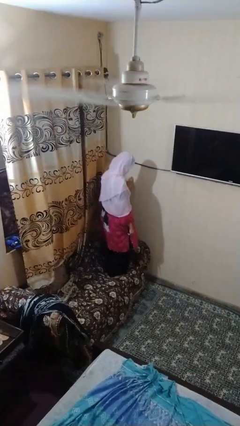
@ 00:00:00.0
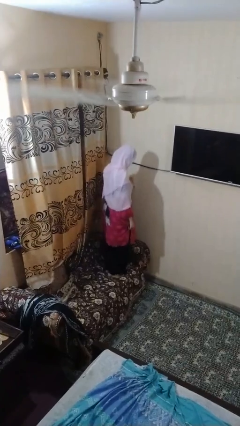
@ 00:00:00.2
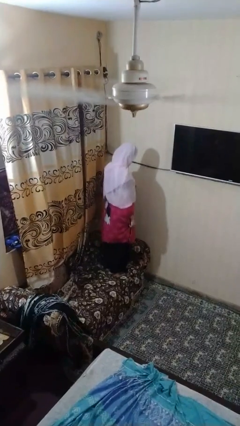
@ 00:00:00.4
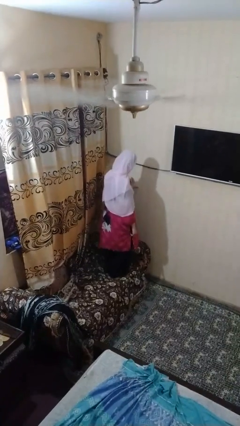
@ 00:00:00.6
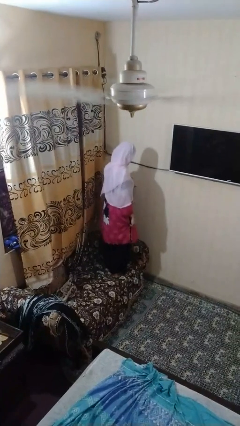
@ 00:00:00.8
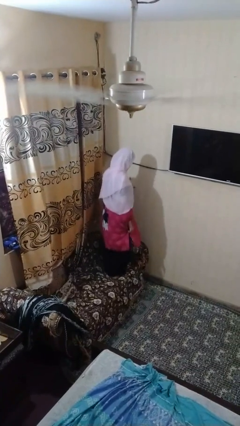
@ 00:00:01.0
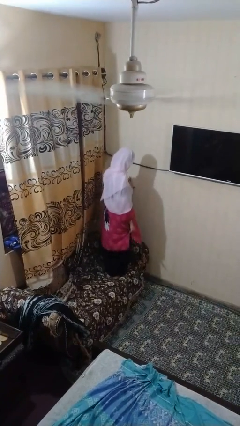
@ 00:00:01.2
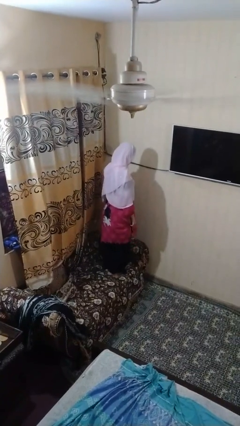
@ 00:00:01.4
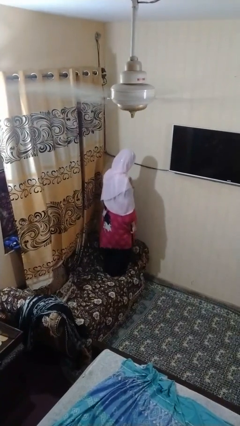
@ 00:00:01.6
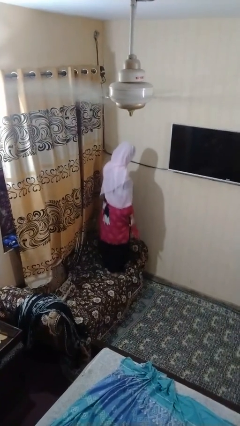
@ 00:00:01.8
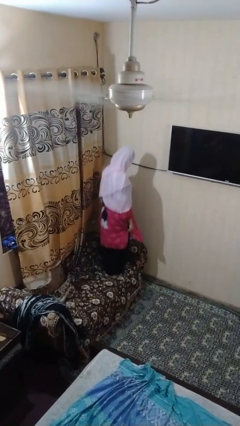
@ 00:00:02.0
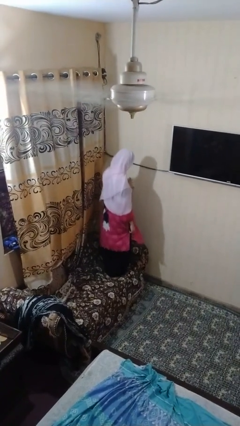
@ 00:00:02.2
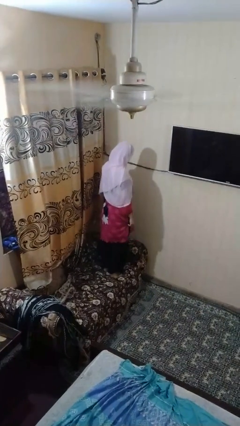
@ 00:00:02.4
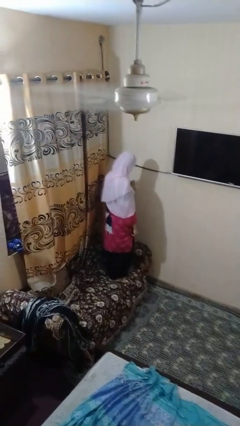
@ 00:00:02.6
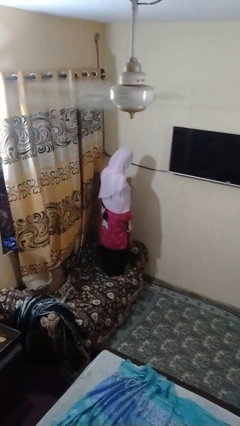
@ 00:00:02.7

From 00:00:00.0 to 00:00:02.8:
person jumps on couch

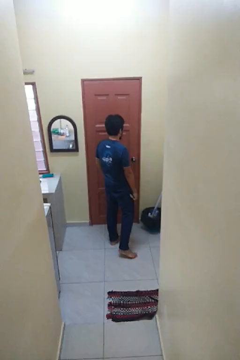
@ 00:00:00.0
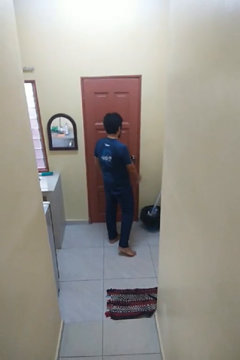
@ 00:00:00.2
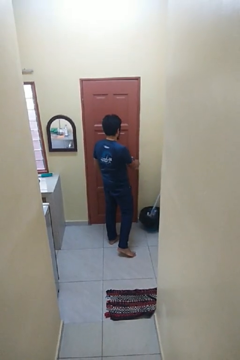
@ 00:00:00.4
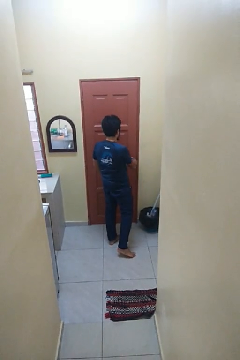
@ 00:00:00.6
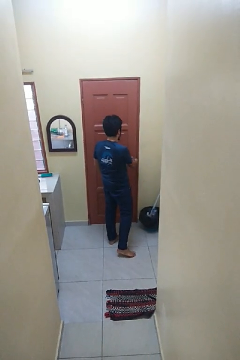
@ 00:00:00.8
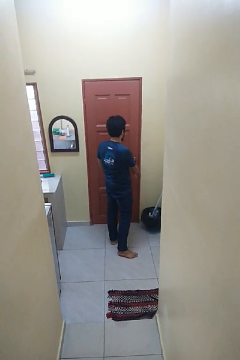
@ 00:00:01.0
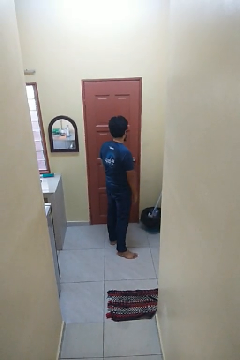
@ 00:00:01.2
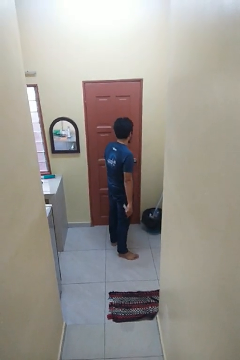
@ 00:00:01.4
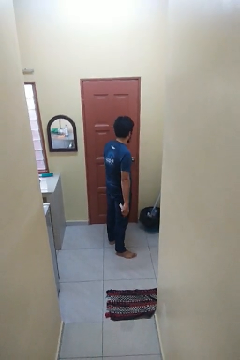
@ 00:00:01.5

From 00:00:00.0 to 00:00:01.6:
person locks door with keys

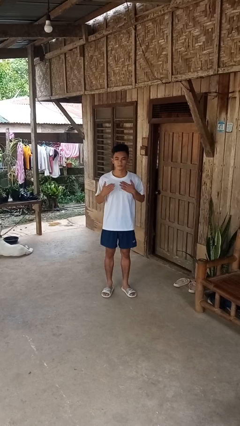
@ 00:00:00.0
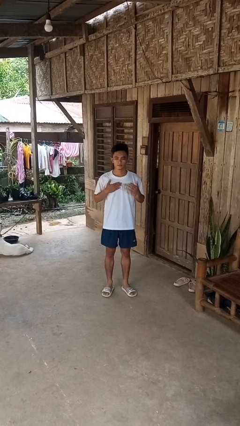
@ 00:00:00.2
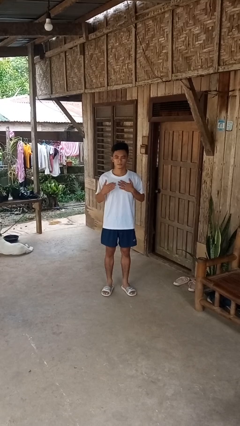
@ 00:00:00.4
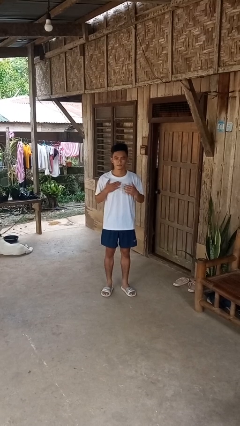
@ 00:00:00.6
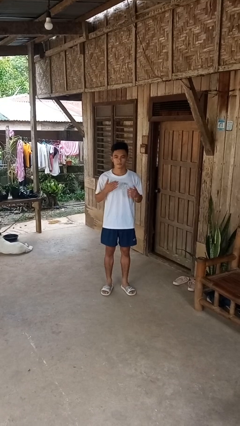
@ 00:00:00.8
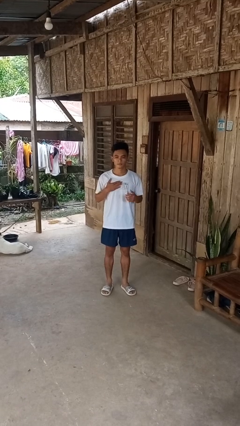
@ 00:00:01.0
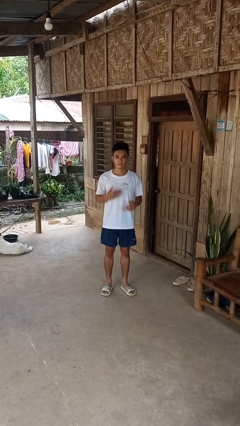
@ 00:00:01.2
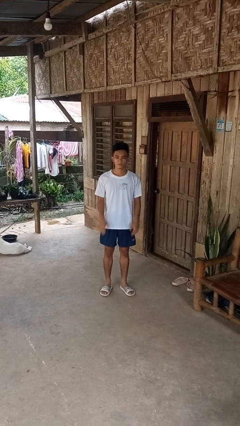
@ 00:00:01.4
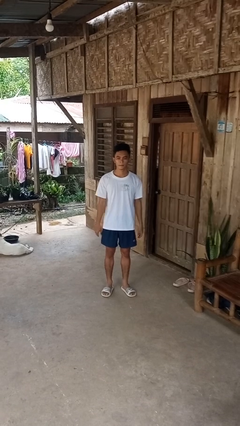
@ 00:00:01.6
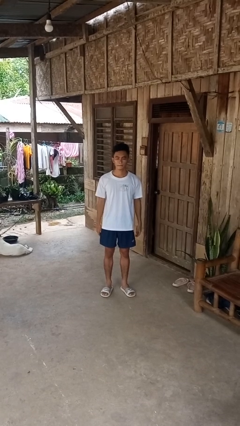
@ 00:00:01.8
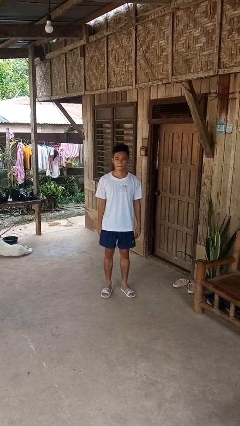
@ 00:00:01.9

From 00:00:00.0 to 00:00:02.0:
person drums on chest

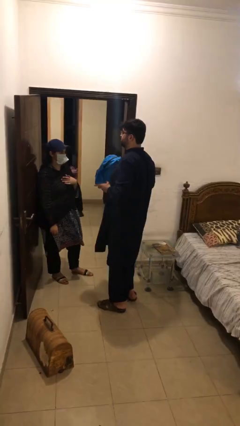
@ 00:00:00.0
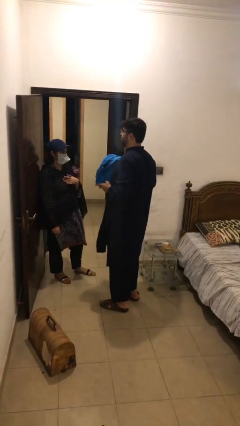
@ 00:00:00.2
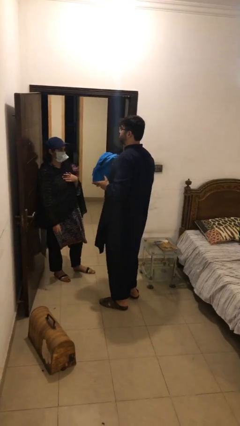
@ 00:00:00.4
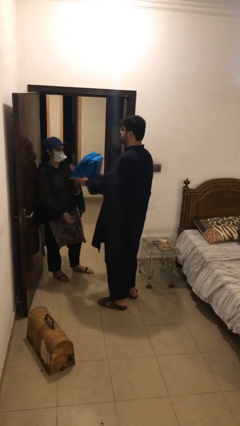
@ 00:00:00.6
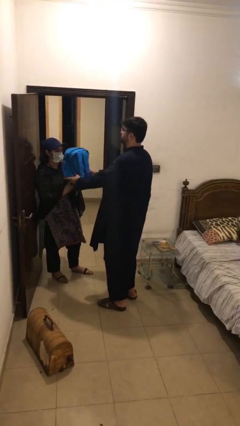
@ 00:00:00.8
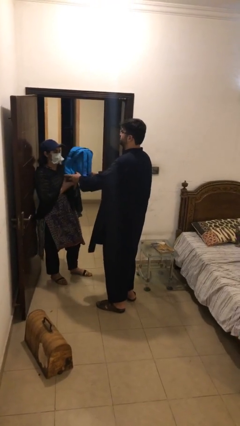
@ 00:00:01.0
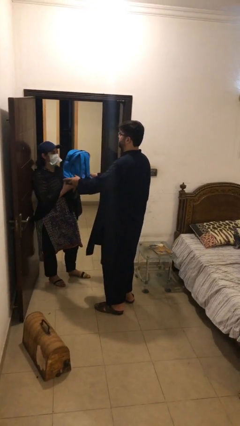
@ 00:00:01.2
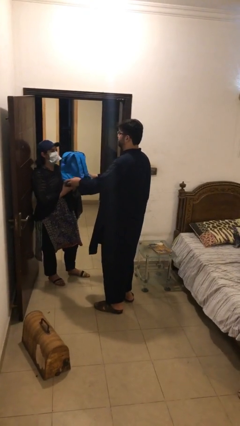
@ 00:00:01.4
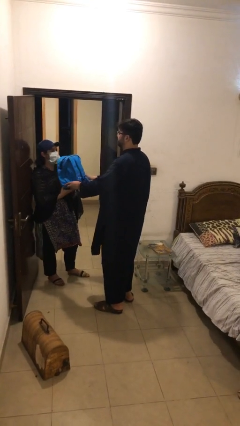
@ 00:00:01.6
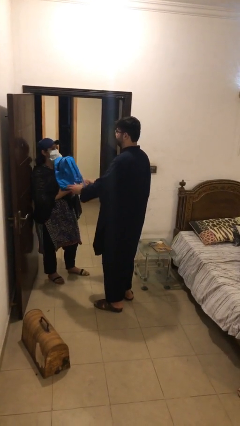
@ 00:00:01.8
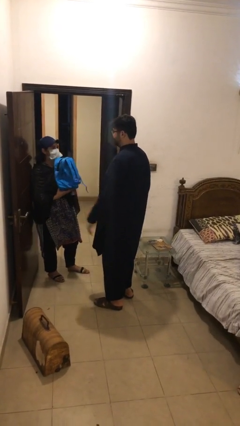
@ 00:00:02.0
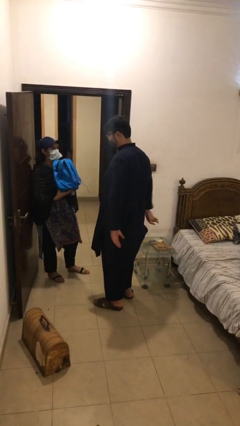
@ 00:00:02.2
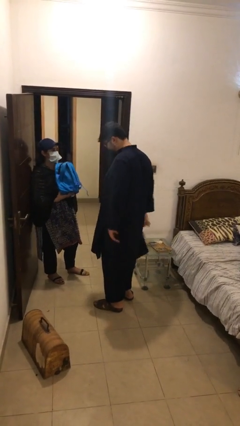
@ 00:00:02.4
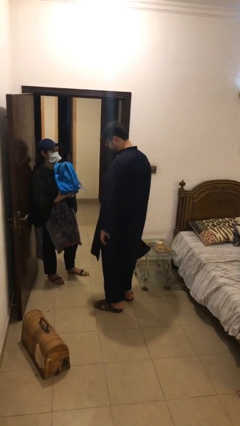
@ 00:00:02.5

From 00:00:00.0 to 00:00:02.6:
person transfers object to person

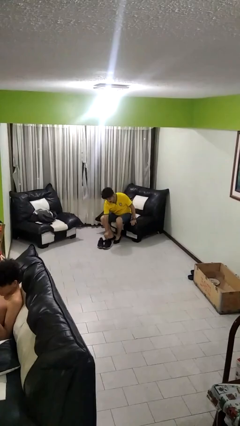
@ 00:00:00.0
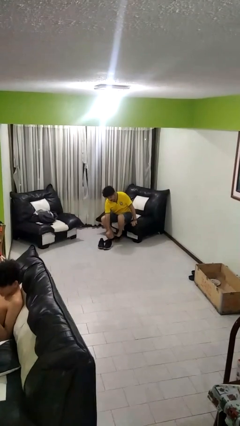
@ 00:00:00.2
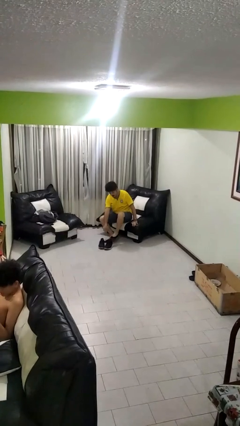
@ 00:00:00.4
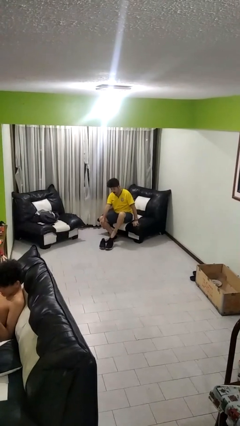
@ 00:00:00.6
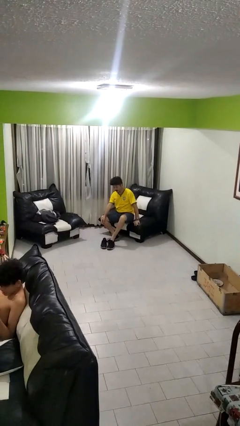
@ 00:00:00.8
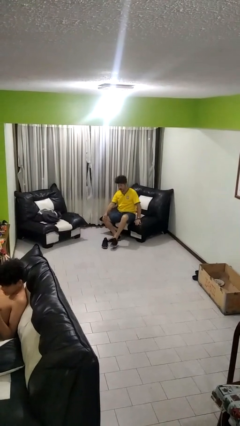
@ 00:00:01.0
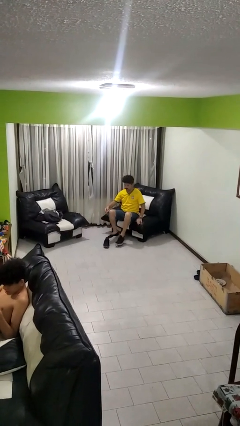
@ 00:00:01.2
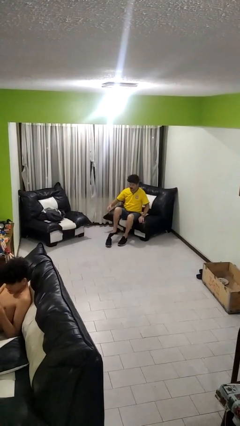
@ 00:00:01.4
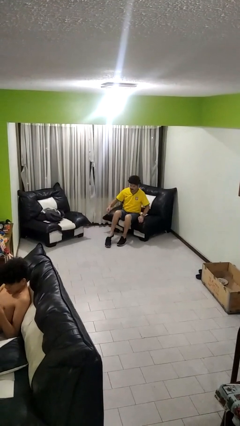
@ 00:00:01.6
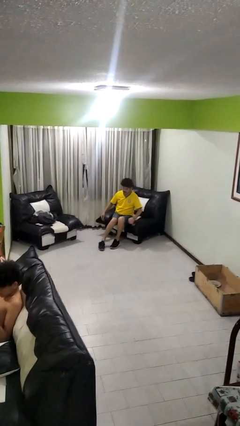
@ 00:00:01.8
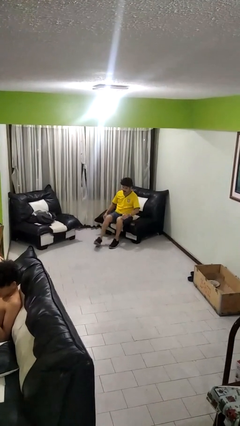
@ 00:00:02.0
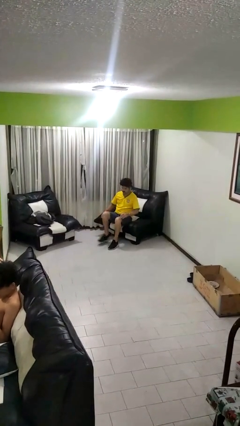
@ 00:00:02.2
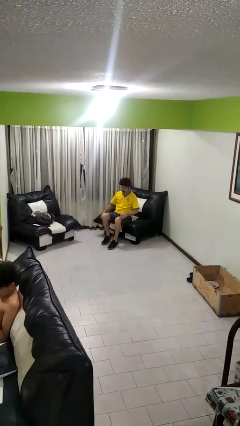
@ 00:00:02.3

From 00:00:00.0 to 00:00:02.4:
person puts on shoes

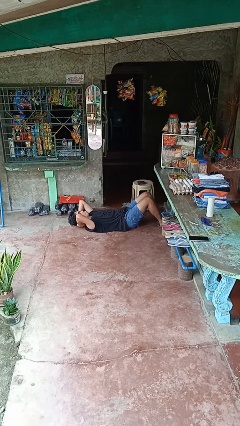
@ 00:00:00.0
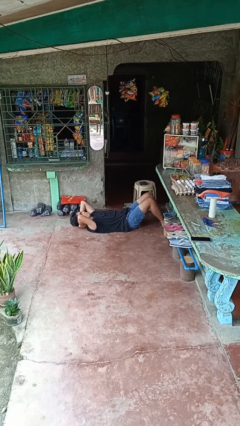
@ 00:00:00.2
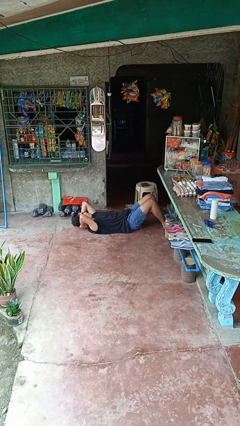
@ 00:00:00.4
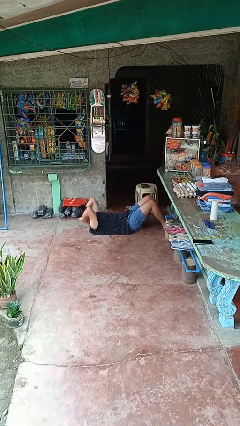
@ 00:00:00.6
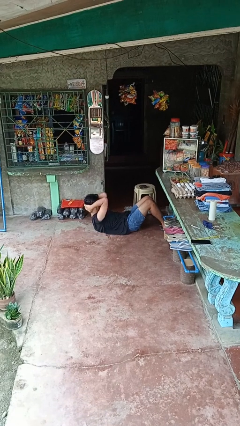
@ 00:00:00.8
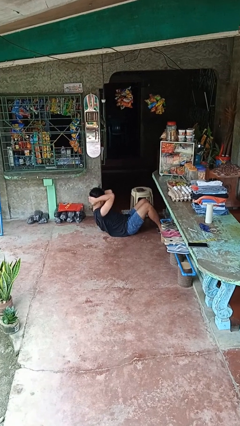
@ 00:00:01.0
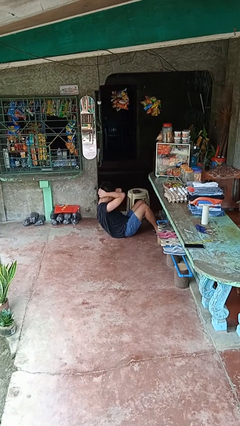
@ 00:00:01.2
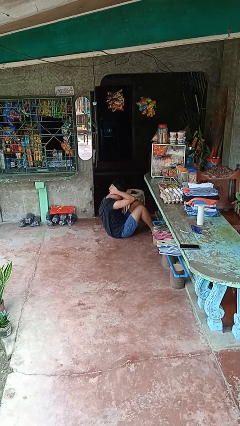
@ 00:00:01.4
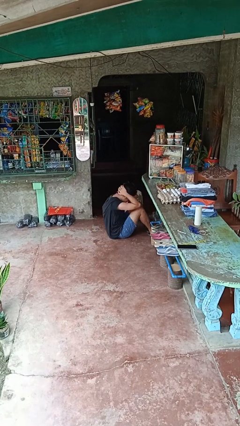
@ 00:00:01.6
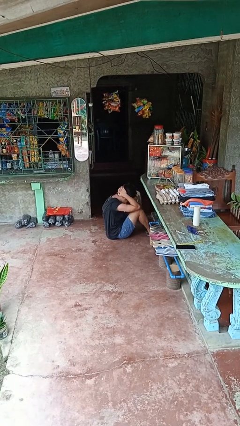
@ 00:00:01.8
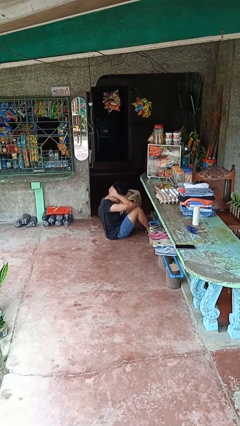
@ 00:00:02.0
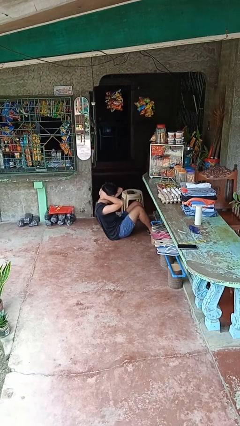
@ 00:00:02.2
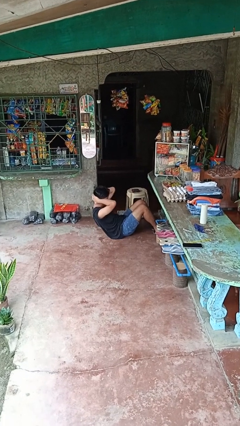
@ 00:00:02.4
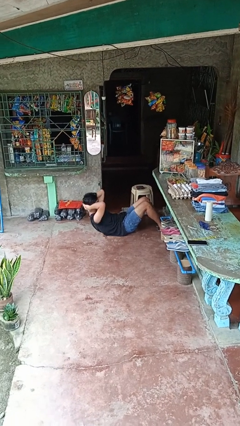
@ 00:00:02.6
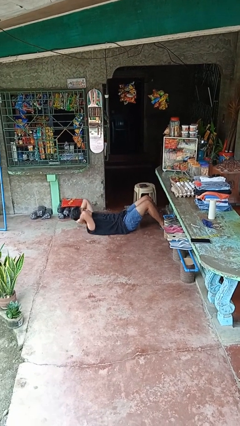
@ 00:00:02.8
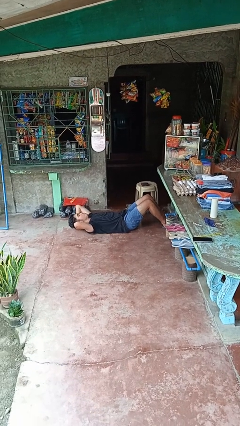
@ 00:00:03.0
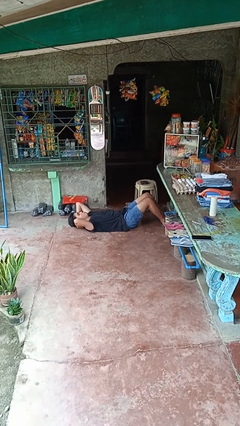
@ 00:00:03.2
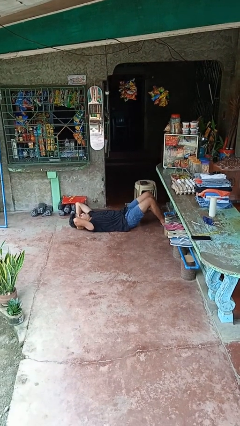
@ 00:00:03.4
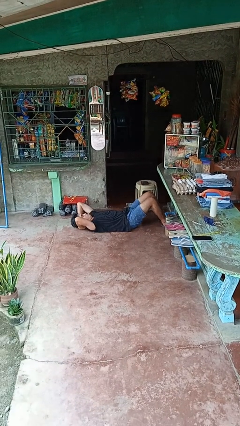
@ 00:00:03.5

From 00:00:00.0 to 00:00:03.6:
person exercises with situp

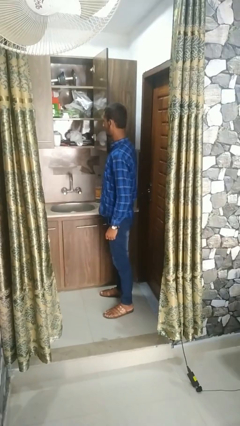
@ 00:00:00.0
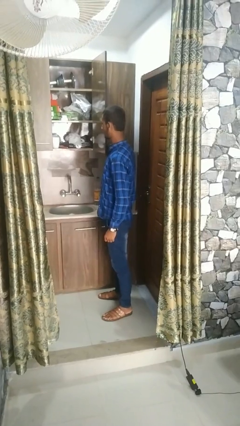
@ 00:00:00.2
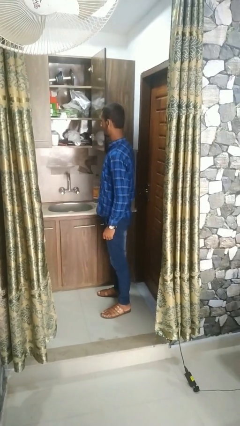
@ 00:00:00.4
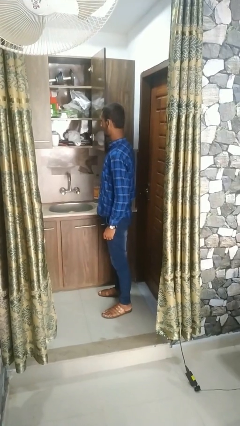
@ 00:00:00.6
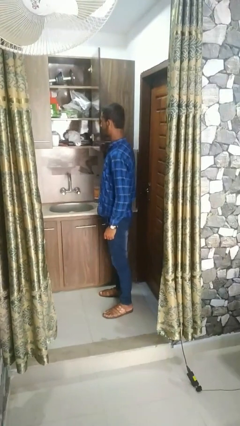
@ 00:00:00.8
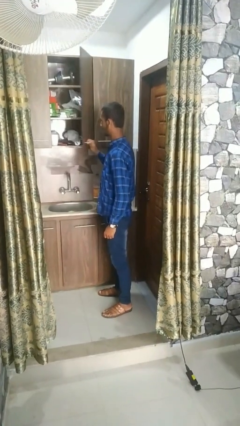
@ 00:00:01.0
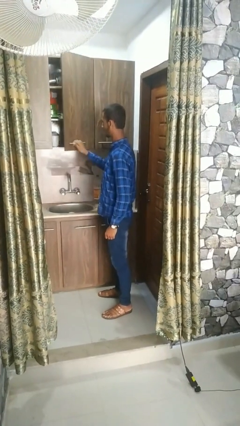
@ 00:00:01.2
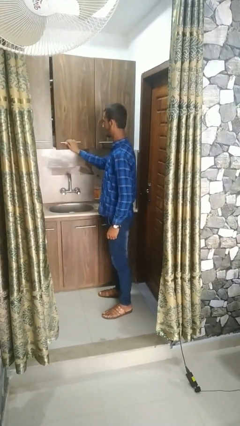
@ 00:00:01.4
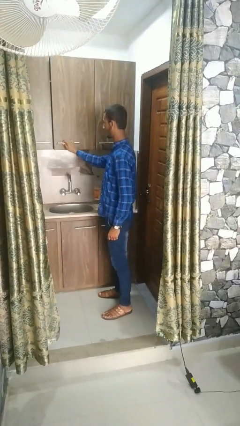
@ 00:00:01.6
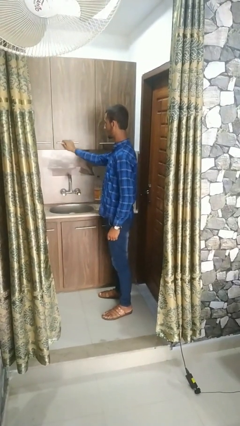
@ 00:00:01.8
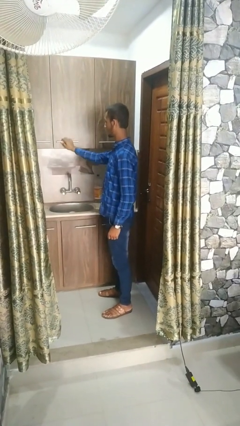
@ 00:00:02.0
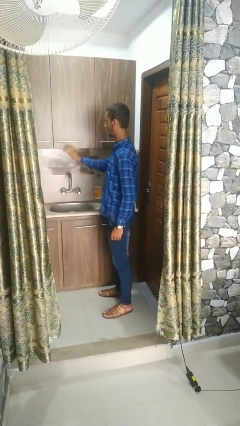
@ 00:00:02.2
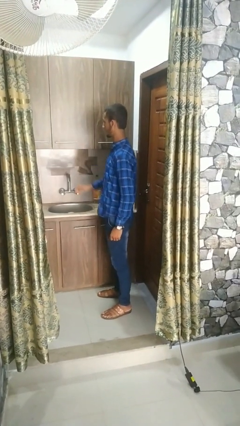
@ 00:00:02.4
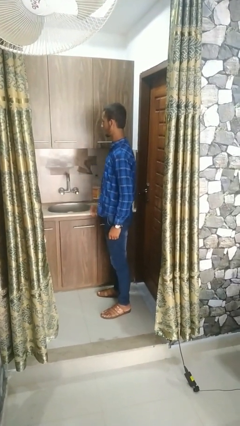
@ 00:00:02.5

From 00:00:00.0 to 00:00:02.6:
person closes cabinet
